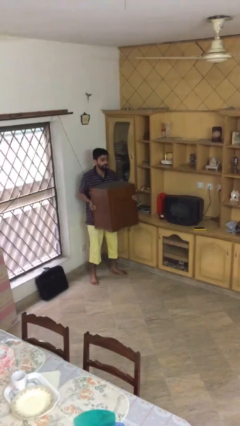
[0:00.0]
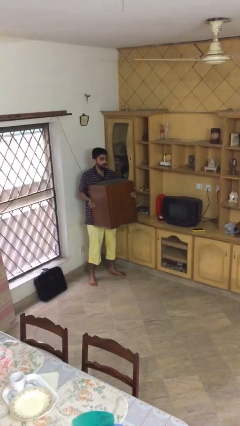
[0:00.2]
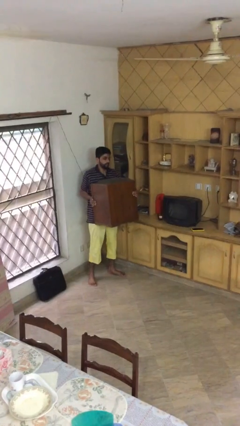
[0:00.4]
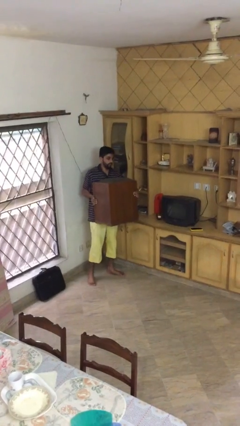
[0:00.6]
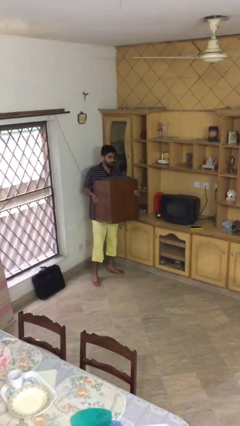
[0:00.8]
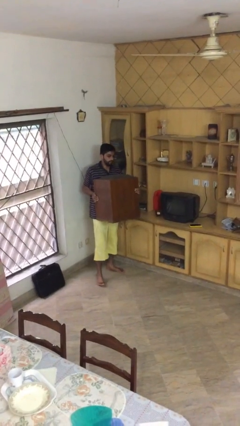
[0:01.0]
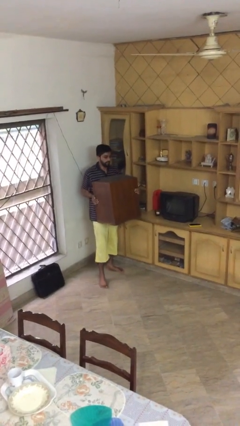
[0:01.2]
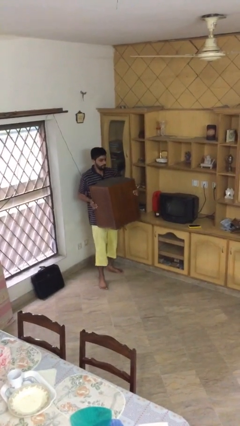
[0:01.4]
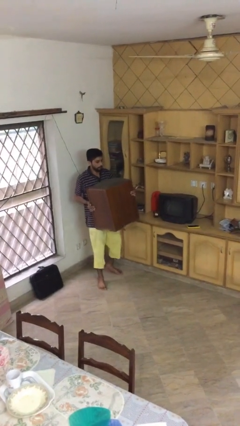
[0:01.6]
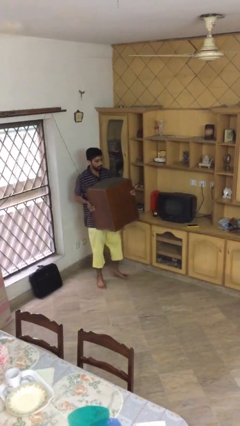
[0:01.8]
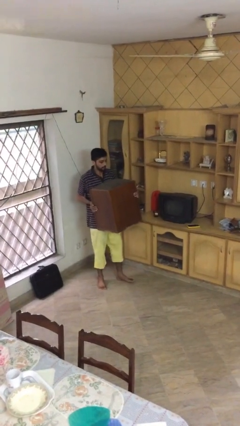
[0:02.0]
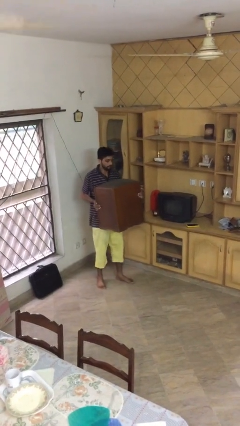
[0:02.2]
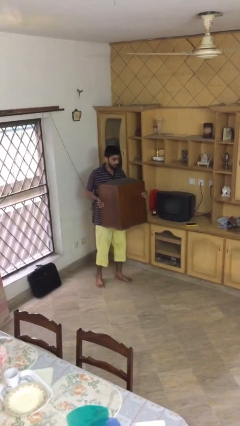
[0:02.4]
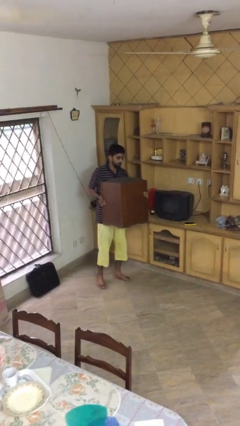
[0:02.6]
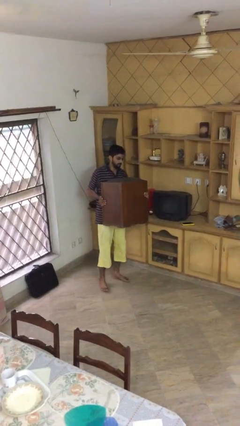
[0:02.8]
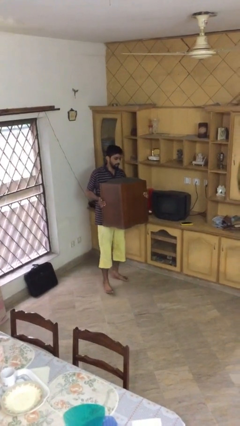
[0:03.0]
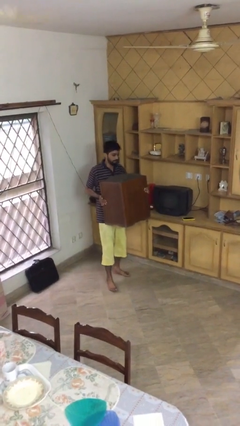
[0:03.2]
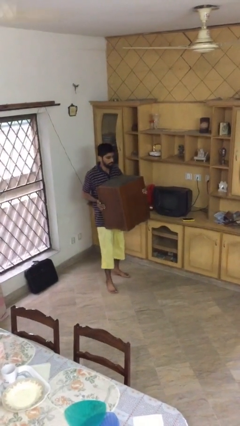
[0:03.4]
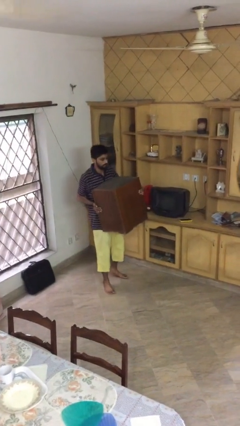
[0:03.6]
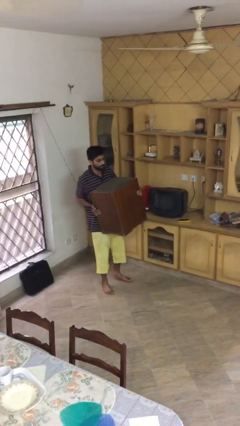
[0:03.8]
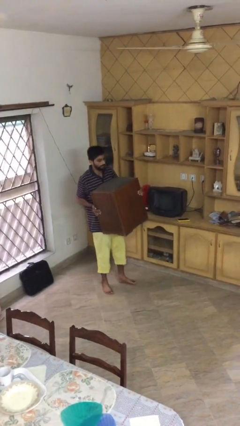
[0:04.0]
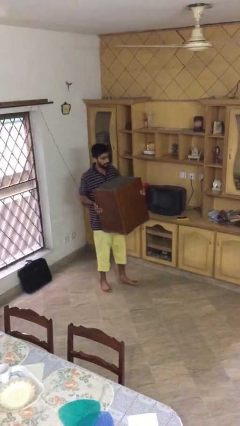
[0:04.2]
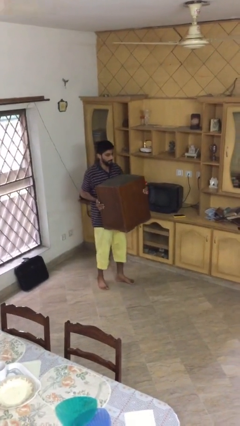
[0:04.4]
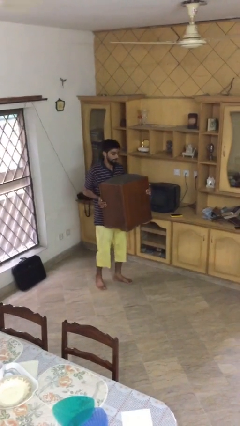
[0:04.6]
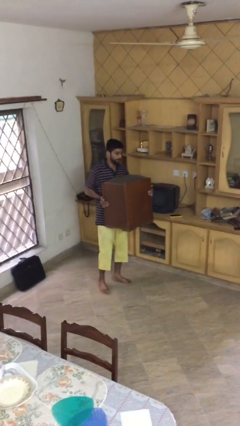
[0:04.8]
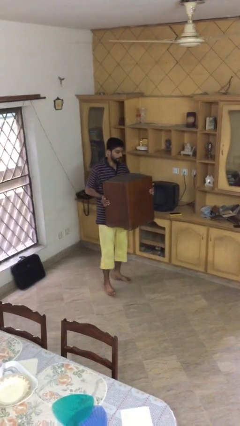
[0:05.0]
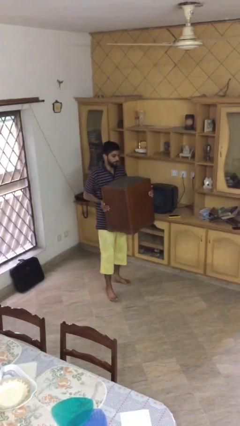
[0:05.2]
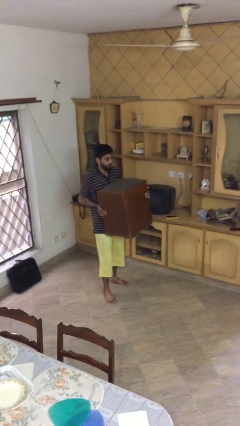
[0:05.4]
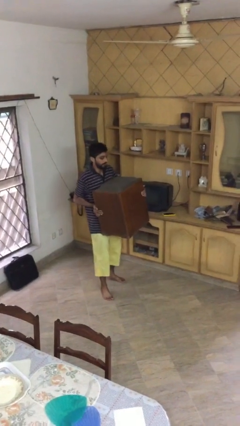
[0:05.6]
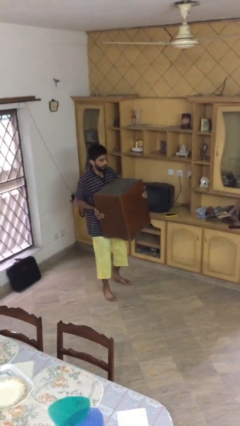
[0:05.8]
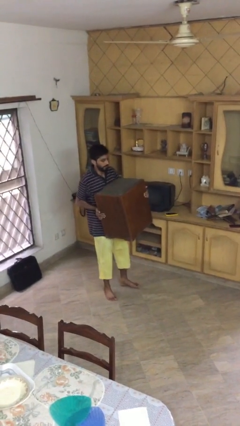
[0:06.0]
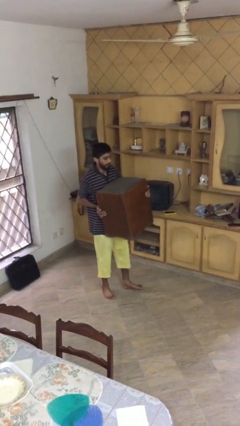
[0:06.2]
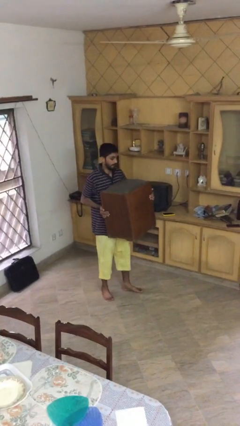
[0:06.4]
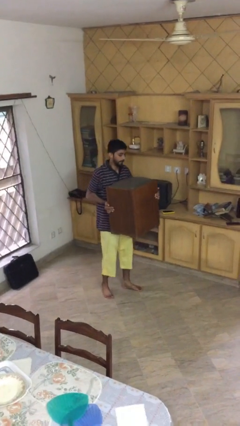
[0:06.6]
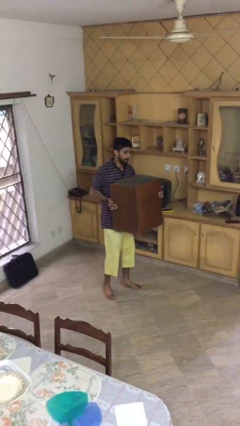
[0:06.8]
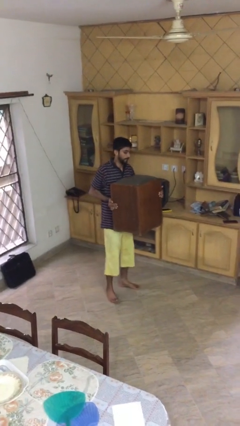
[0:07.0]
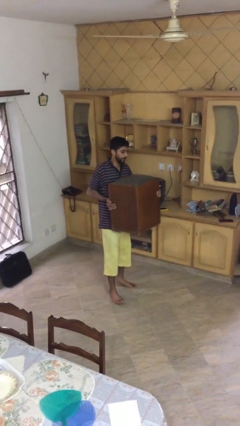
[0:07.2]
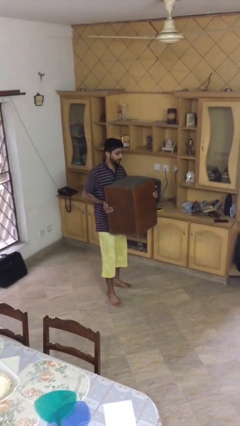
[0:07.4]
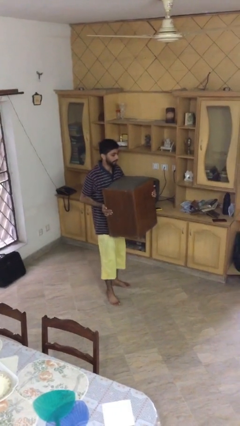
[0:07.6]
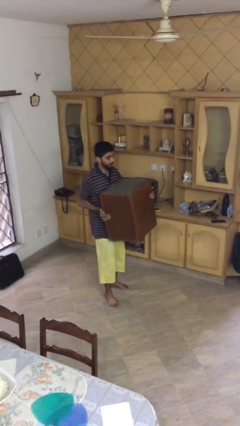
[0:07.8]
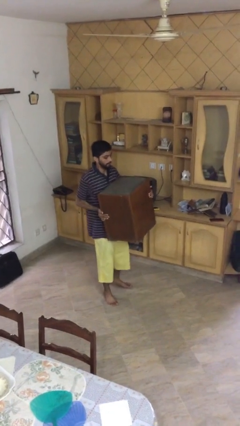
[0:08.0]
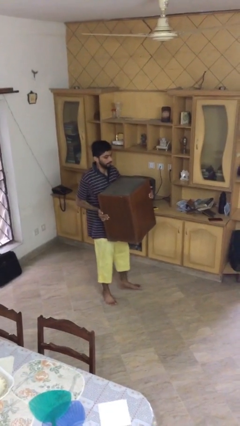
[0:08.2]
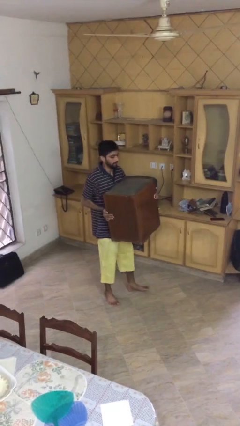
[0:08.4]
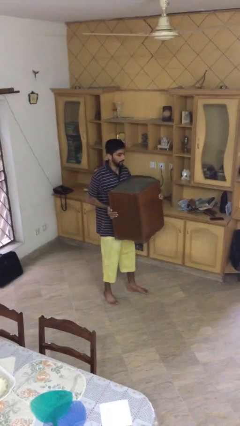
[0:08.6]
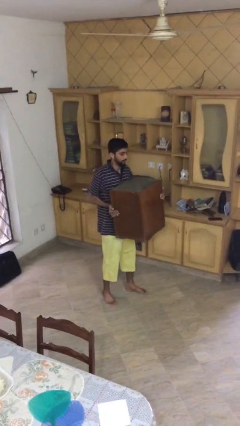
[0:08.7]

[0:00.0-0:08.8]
person carries heavy object

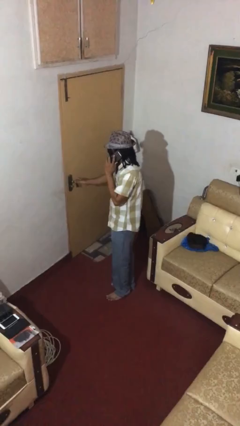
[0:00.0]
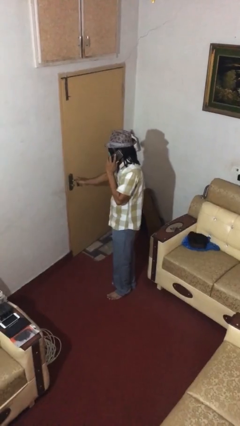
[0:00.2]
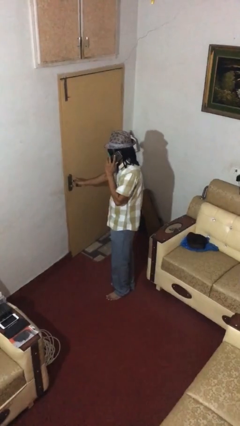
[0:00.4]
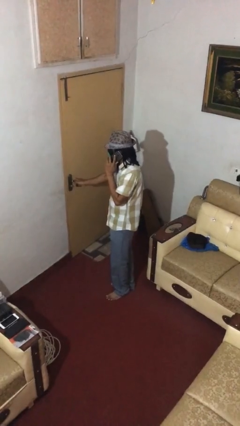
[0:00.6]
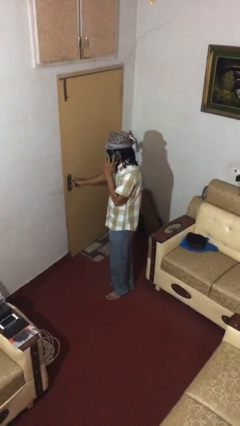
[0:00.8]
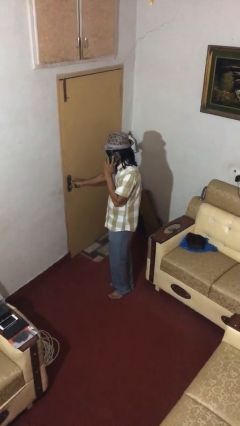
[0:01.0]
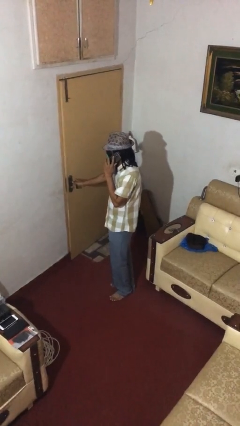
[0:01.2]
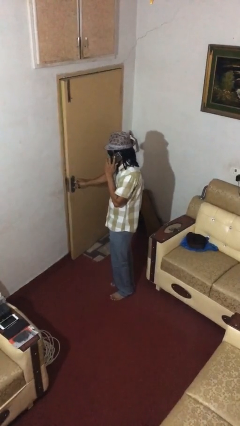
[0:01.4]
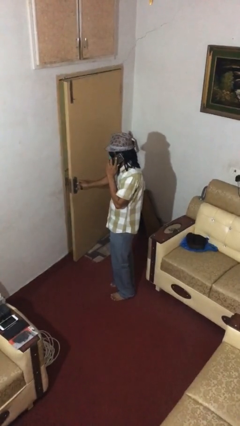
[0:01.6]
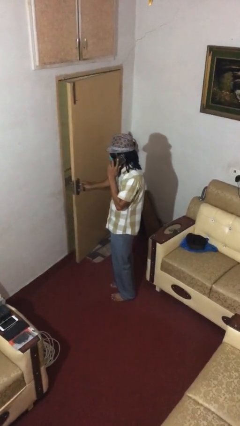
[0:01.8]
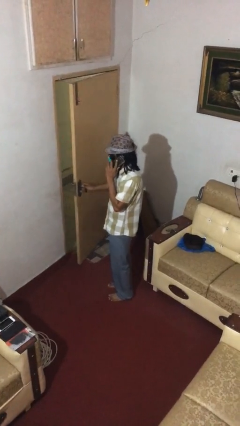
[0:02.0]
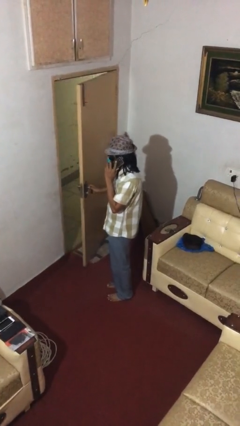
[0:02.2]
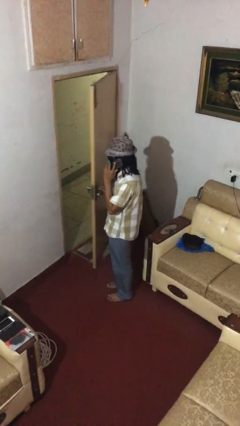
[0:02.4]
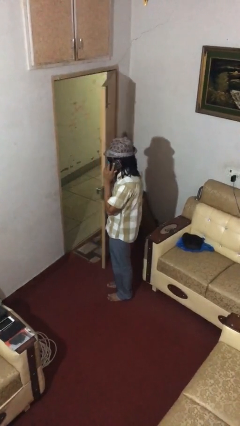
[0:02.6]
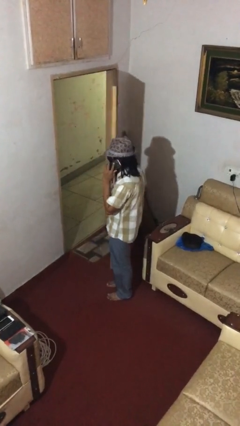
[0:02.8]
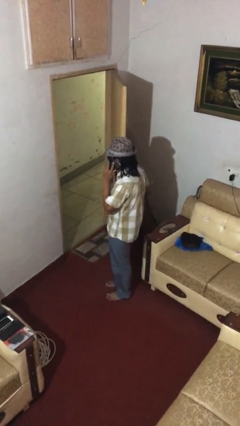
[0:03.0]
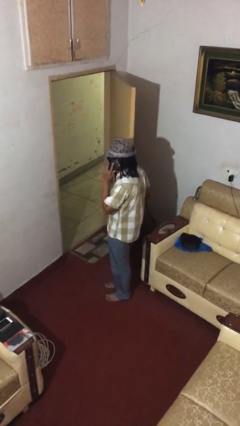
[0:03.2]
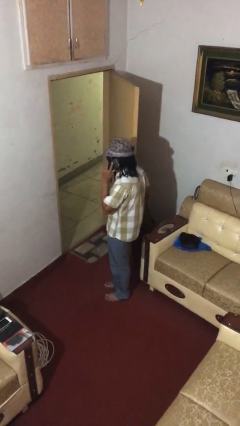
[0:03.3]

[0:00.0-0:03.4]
person opens facility door

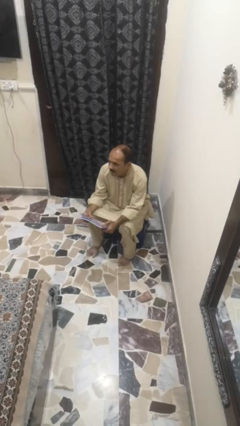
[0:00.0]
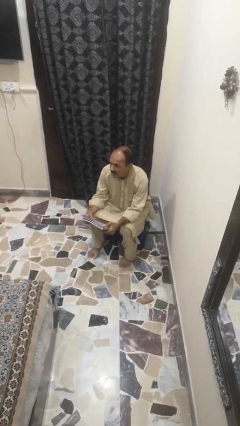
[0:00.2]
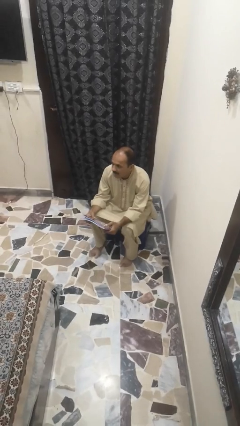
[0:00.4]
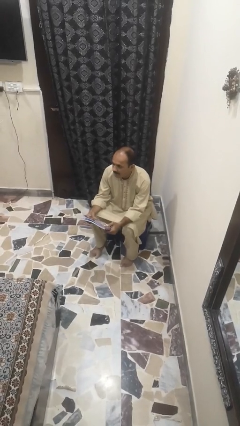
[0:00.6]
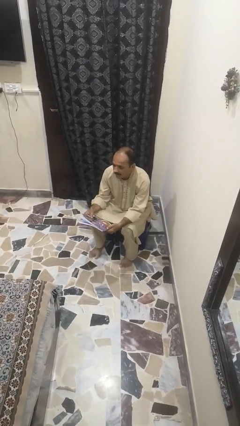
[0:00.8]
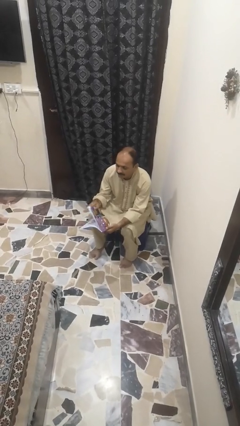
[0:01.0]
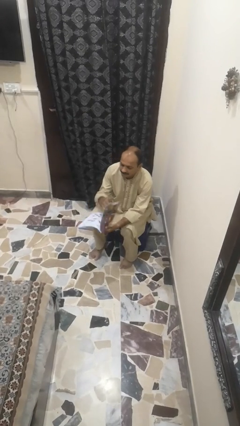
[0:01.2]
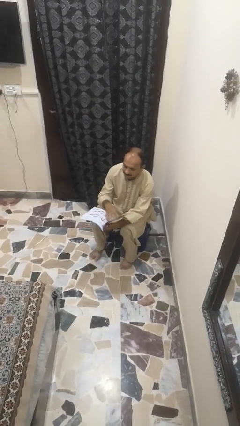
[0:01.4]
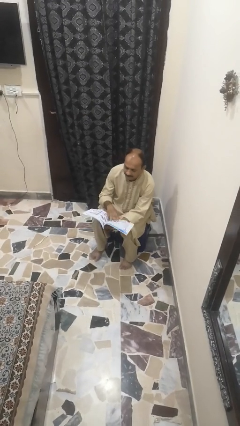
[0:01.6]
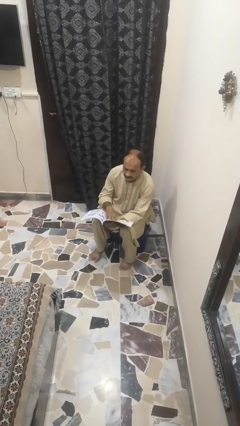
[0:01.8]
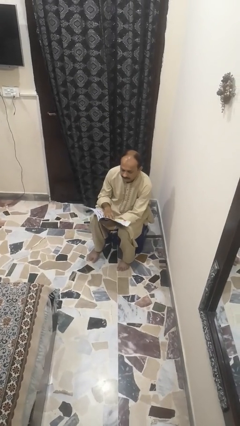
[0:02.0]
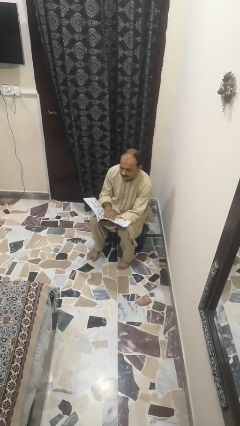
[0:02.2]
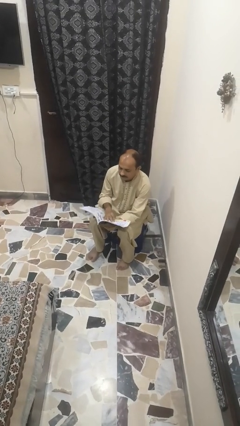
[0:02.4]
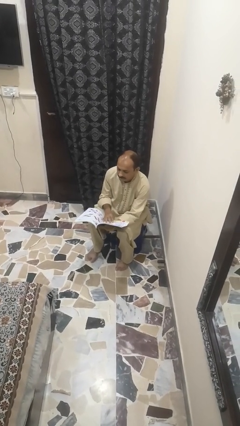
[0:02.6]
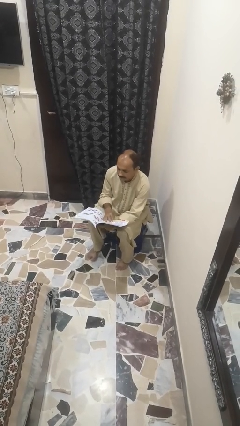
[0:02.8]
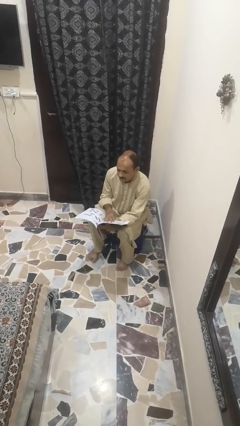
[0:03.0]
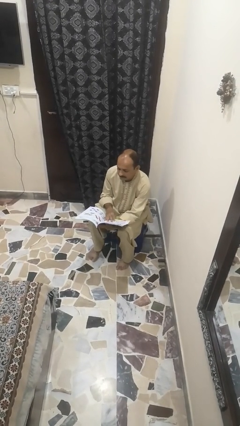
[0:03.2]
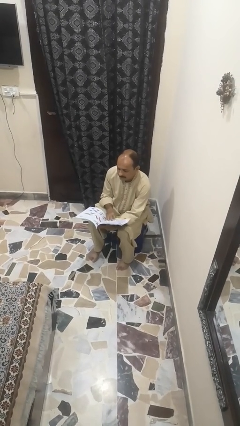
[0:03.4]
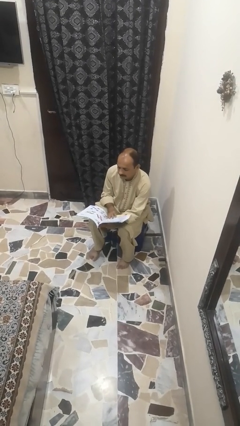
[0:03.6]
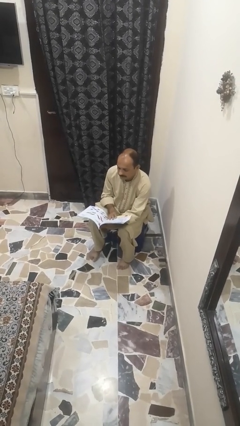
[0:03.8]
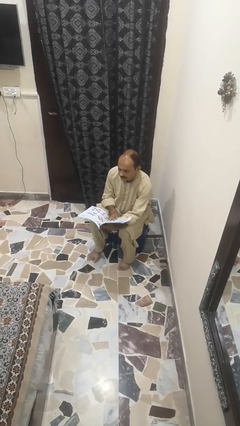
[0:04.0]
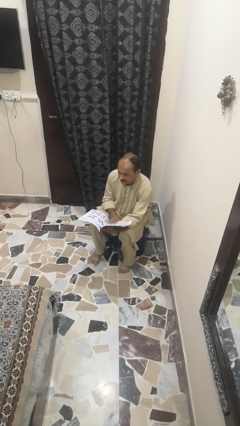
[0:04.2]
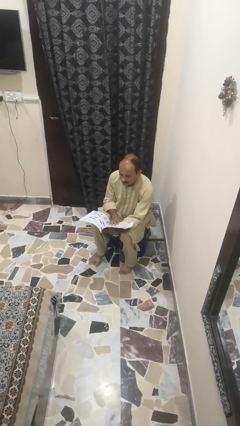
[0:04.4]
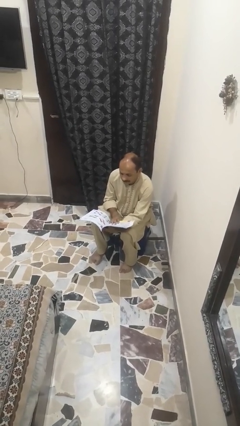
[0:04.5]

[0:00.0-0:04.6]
person reads magazine

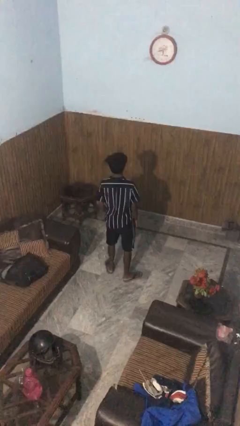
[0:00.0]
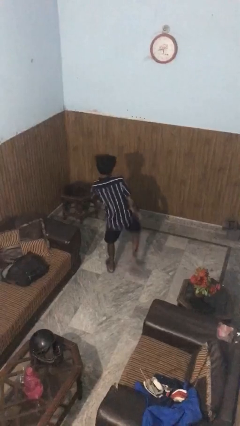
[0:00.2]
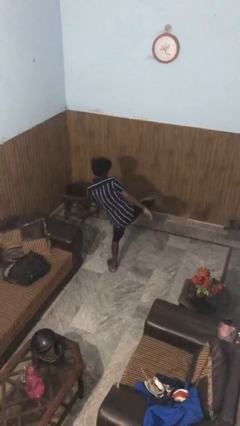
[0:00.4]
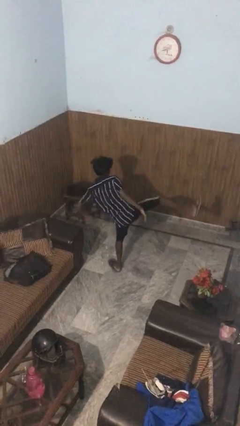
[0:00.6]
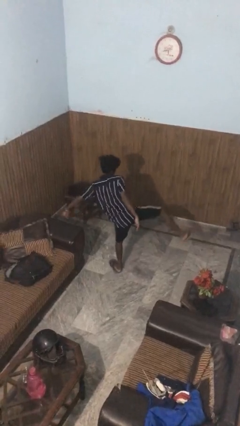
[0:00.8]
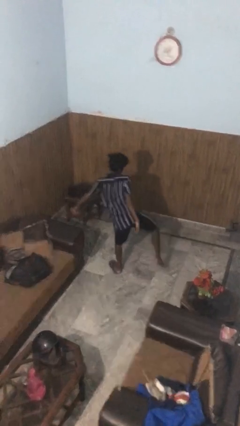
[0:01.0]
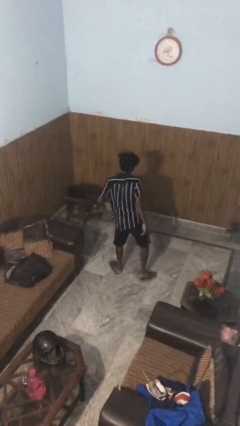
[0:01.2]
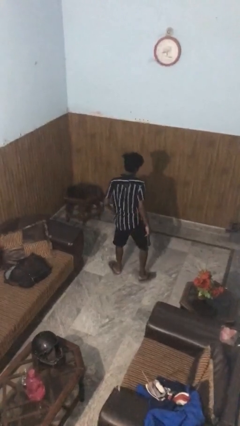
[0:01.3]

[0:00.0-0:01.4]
person karate kicks
